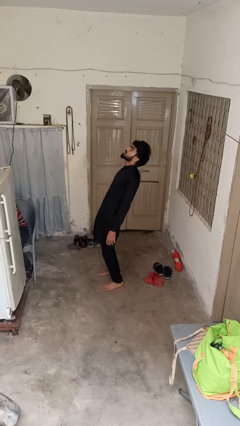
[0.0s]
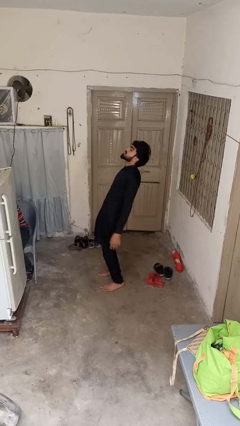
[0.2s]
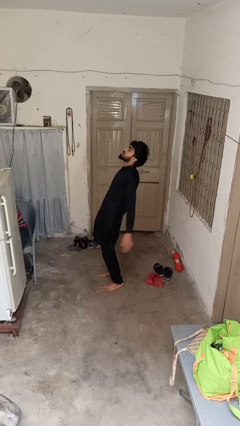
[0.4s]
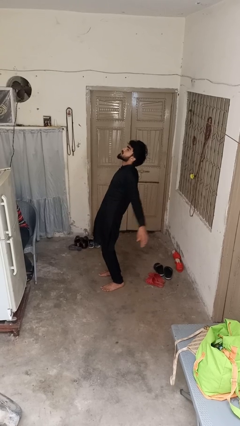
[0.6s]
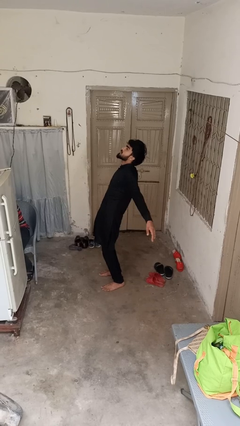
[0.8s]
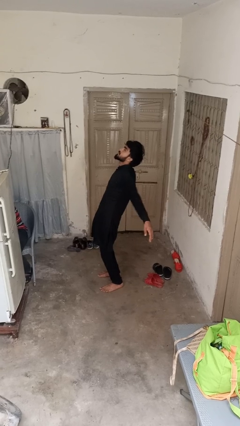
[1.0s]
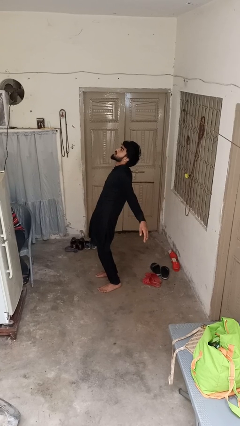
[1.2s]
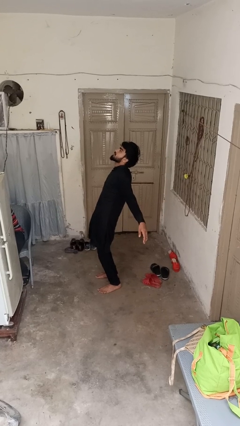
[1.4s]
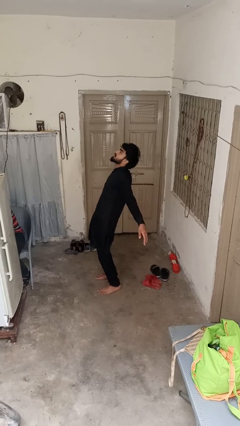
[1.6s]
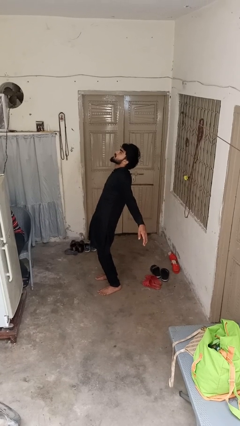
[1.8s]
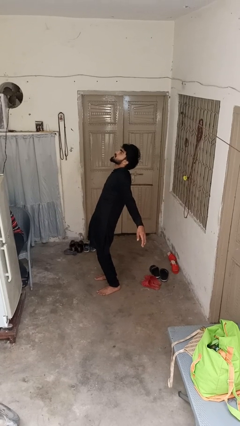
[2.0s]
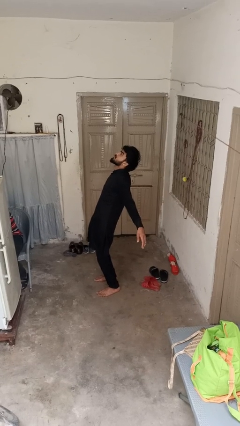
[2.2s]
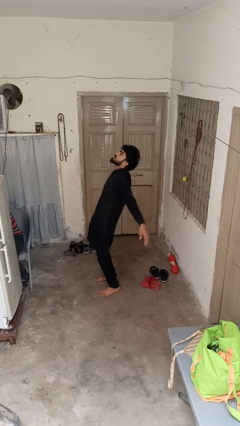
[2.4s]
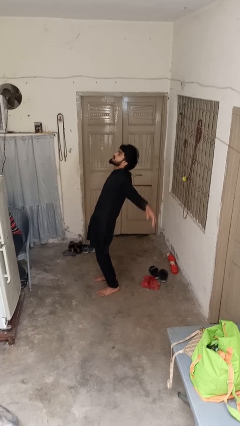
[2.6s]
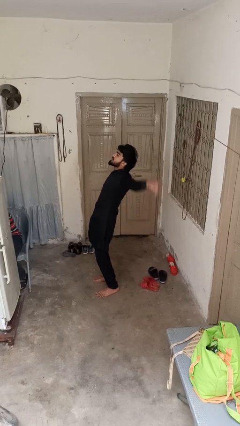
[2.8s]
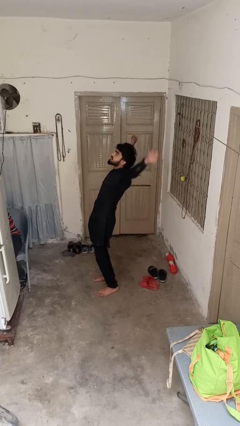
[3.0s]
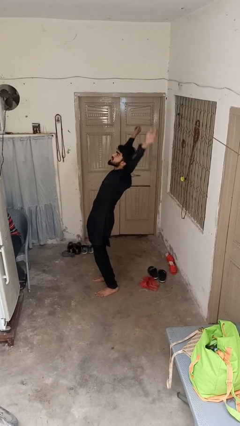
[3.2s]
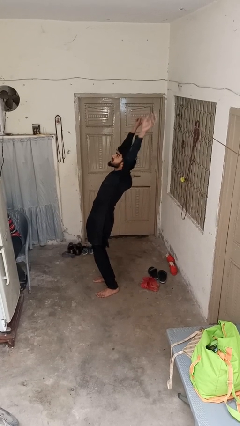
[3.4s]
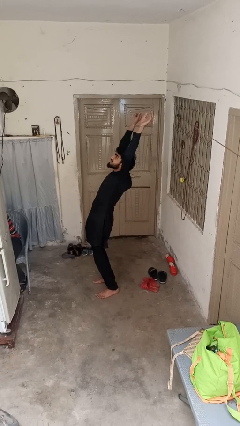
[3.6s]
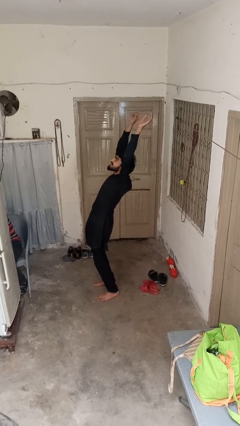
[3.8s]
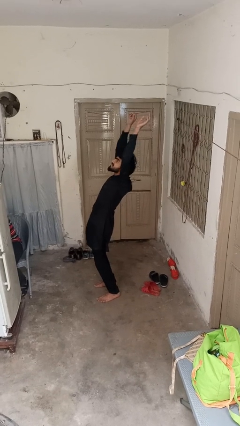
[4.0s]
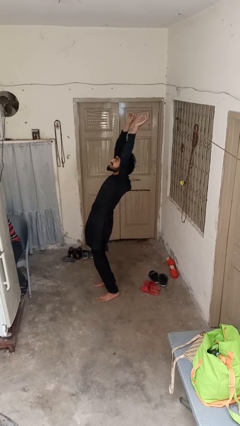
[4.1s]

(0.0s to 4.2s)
person stretches arms to side

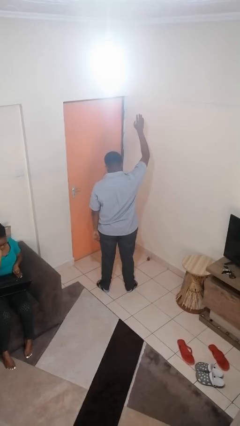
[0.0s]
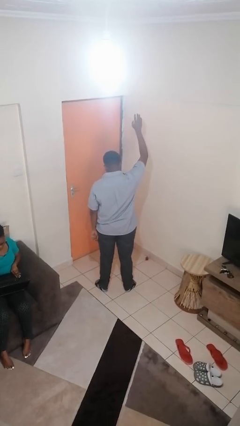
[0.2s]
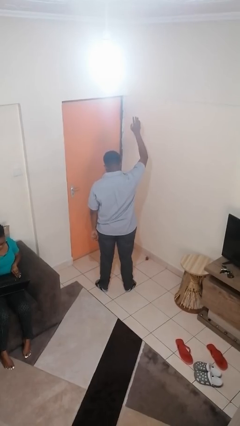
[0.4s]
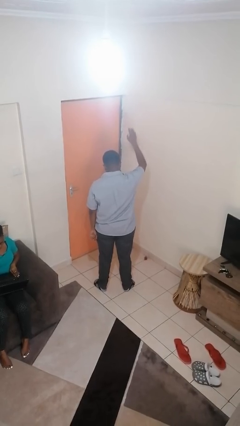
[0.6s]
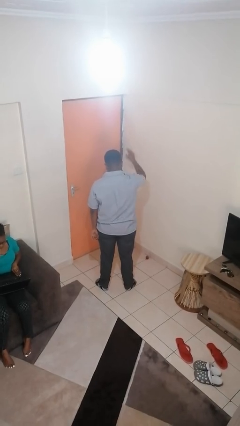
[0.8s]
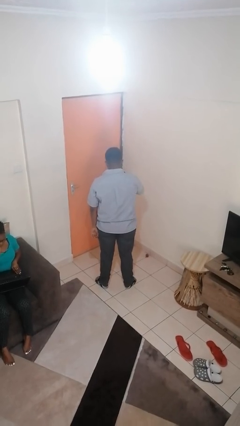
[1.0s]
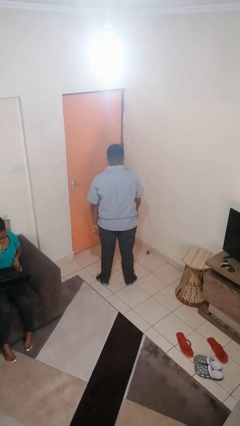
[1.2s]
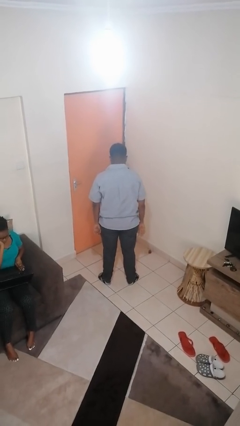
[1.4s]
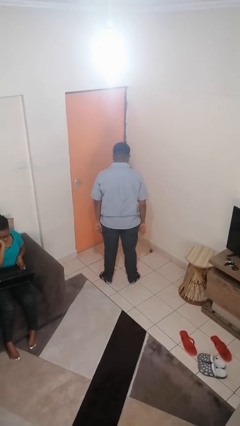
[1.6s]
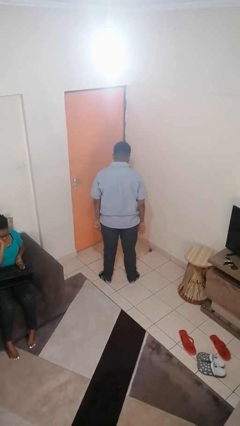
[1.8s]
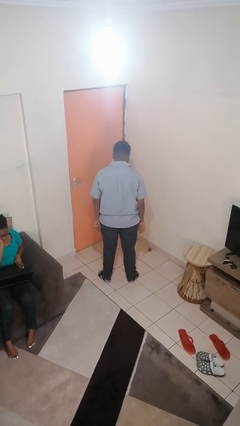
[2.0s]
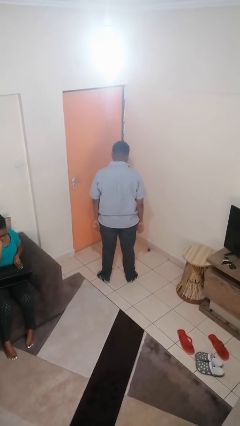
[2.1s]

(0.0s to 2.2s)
person gestures lower hand

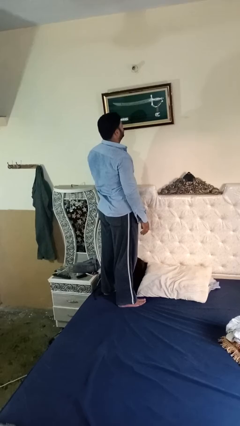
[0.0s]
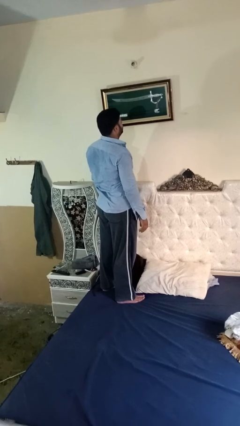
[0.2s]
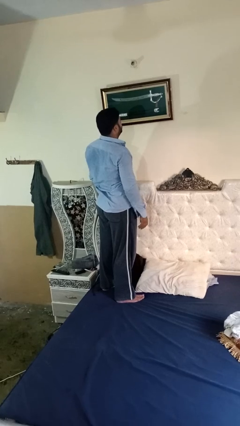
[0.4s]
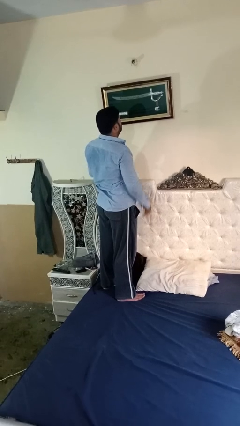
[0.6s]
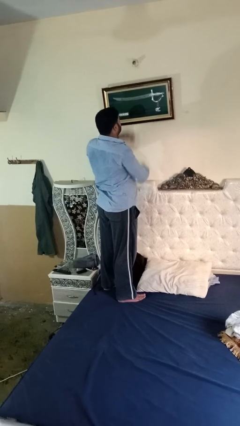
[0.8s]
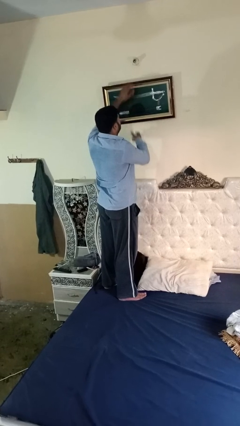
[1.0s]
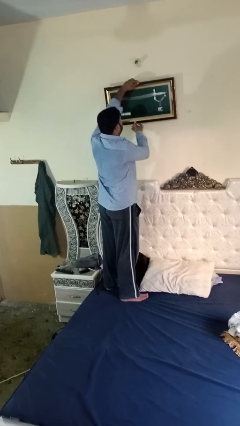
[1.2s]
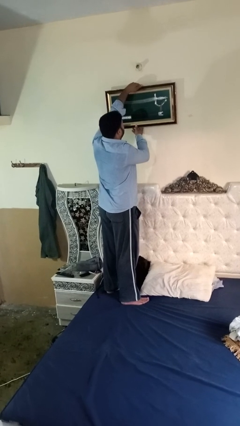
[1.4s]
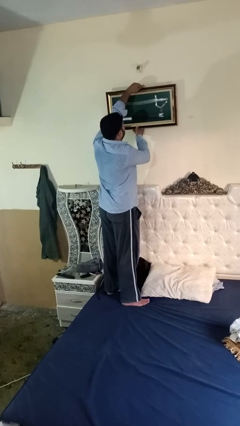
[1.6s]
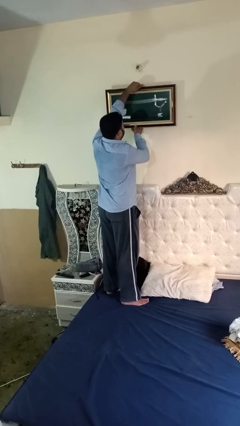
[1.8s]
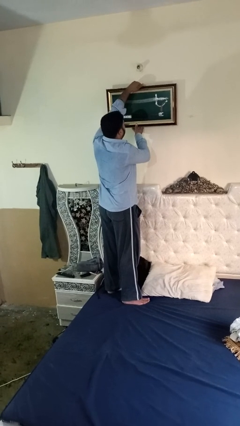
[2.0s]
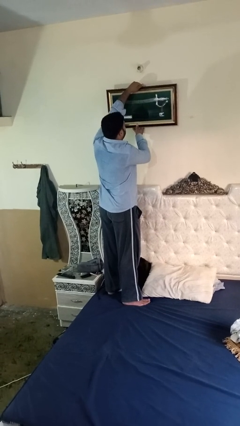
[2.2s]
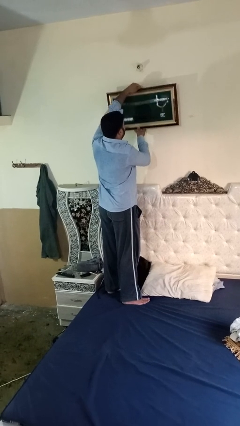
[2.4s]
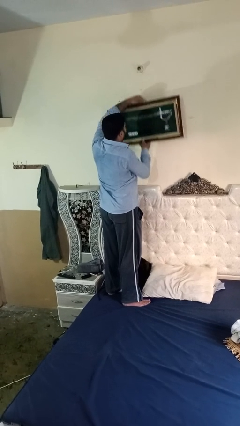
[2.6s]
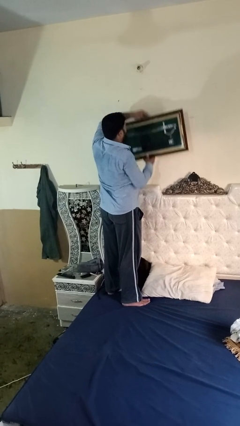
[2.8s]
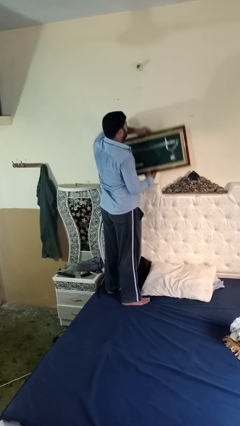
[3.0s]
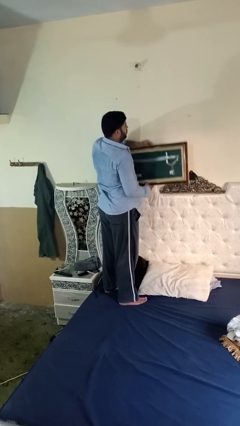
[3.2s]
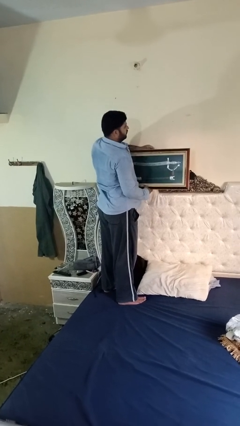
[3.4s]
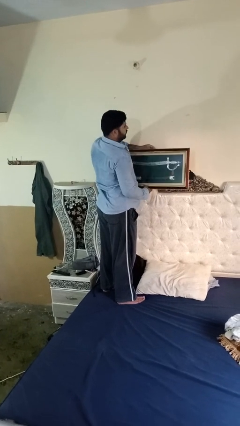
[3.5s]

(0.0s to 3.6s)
person takes down picture frame

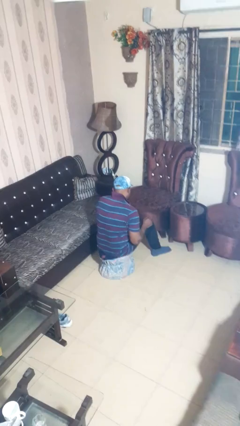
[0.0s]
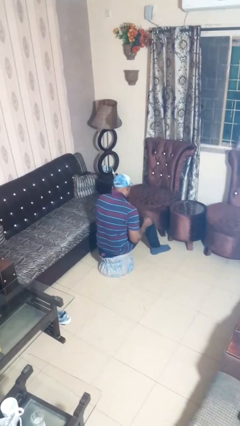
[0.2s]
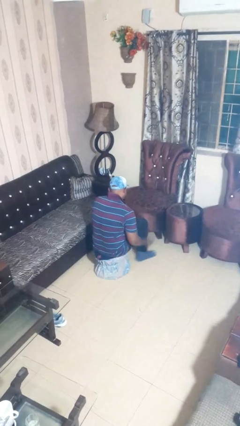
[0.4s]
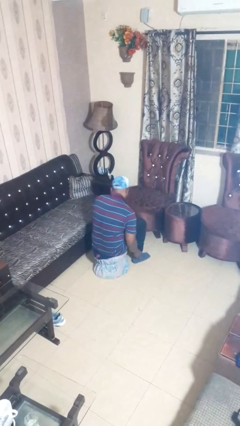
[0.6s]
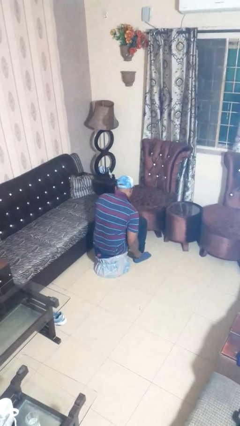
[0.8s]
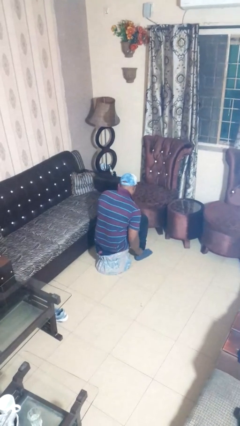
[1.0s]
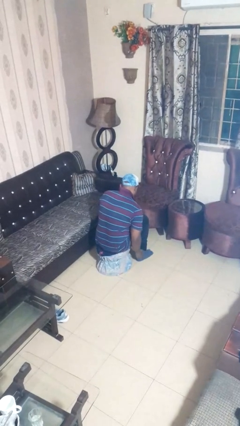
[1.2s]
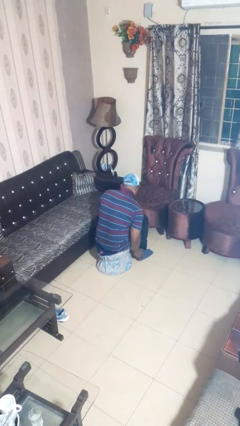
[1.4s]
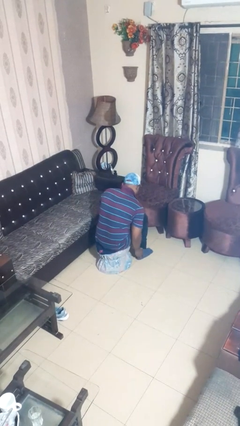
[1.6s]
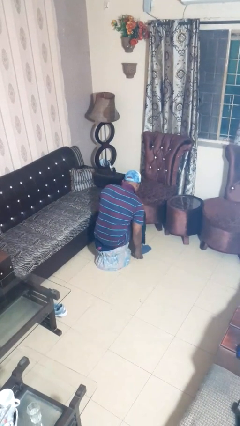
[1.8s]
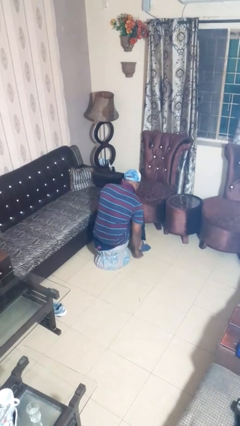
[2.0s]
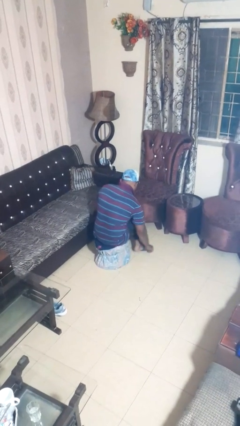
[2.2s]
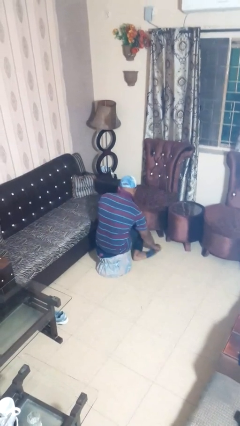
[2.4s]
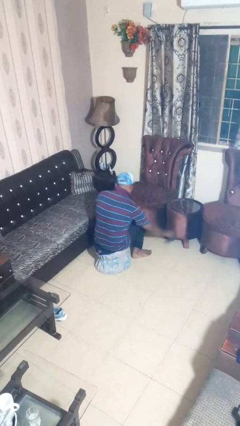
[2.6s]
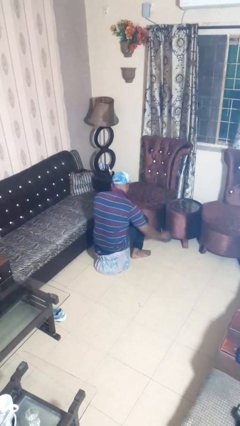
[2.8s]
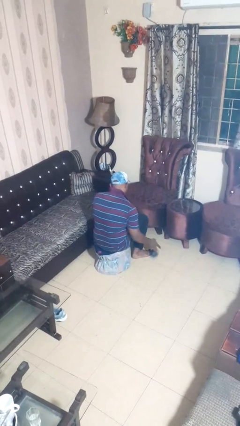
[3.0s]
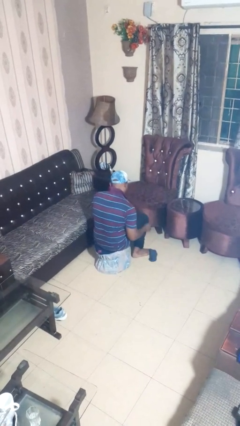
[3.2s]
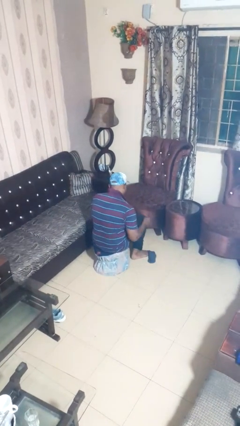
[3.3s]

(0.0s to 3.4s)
person takes off socks

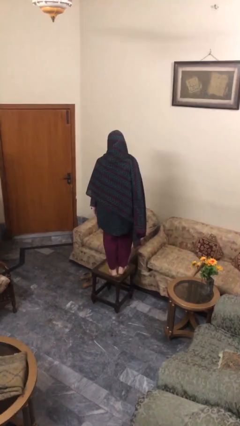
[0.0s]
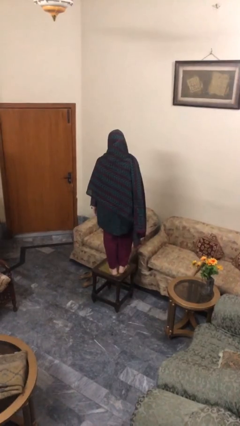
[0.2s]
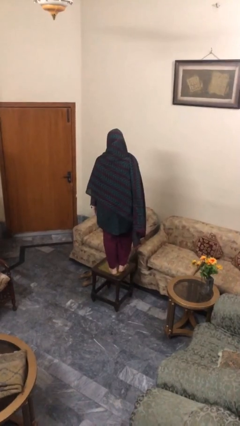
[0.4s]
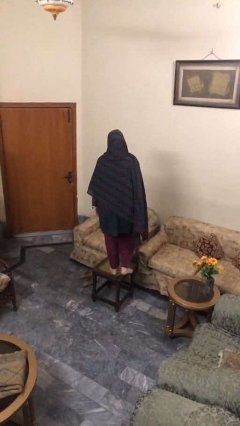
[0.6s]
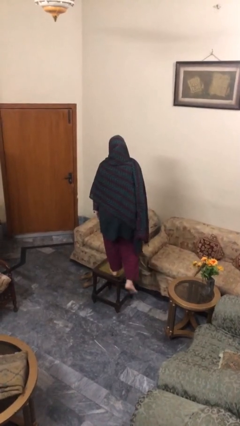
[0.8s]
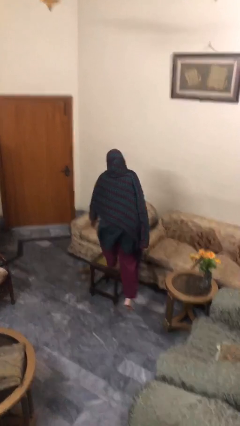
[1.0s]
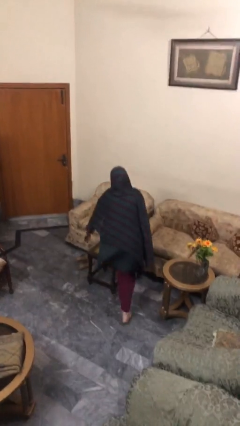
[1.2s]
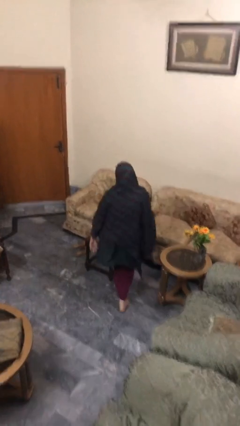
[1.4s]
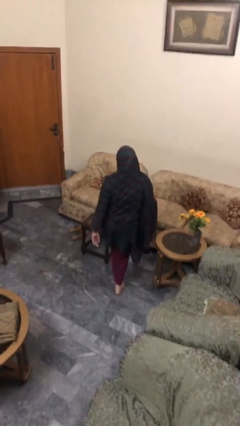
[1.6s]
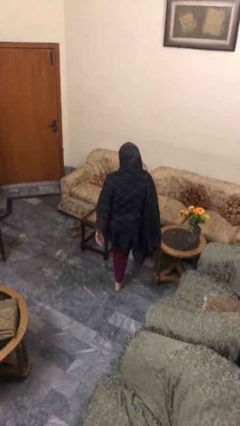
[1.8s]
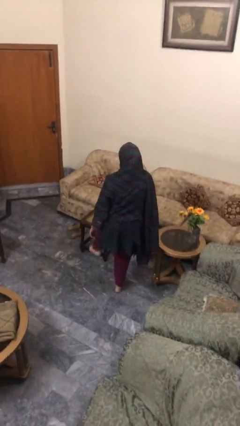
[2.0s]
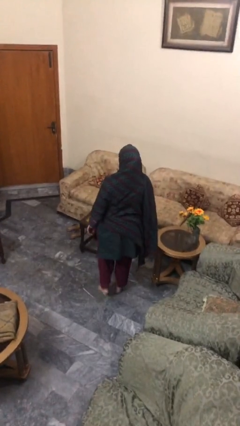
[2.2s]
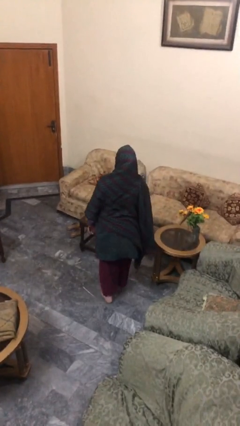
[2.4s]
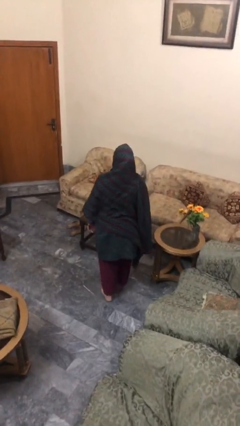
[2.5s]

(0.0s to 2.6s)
person climbs off table

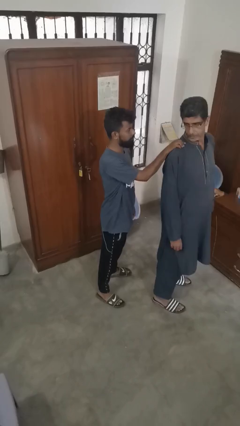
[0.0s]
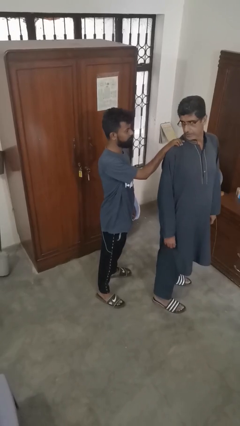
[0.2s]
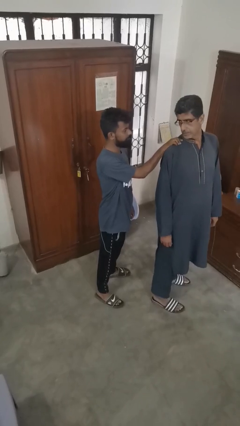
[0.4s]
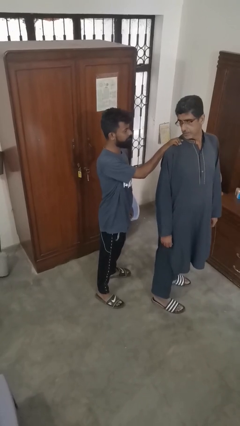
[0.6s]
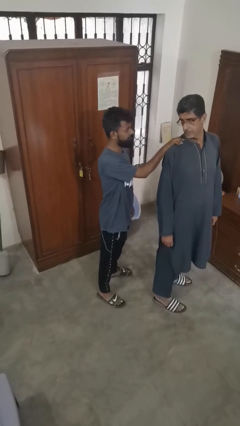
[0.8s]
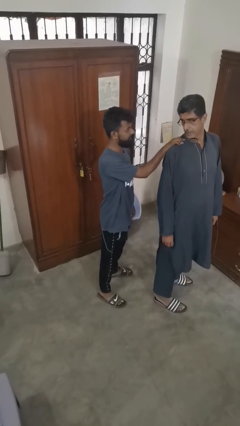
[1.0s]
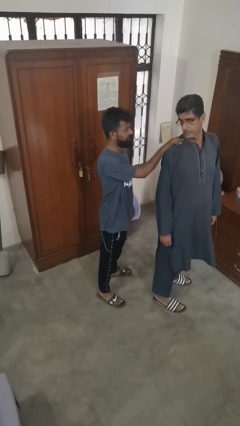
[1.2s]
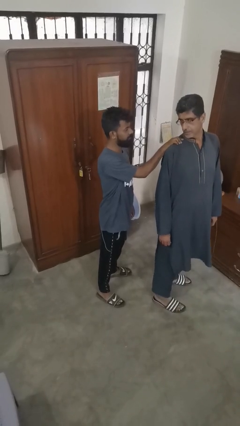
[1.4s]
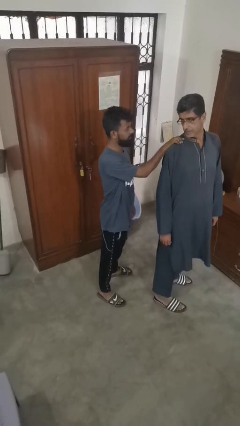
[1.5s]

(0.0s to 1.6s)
person spins person around
